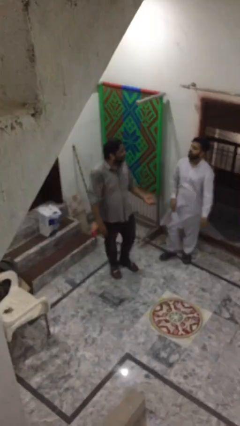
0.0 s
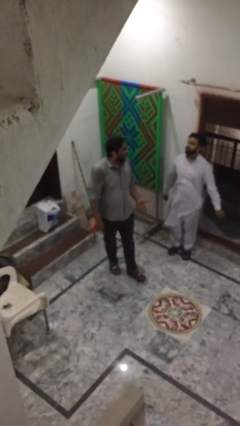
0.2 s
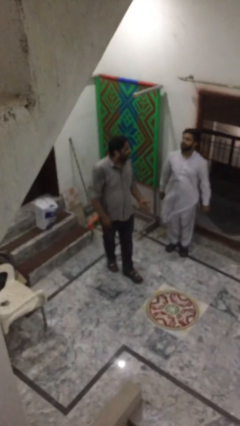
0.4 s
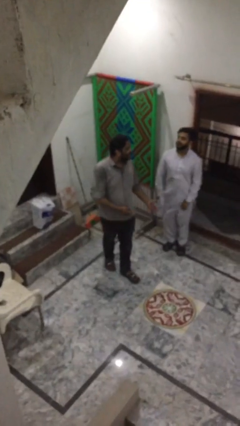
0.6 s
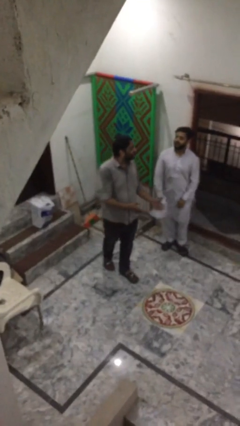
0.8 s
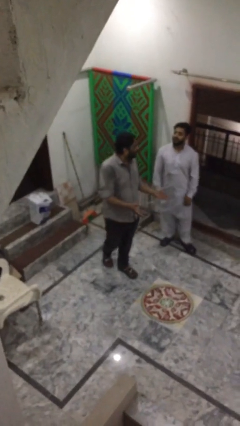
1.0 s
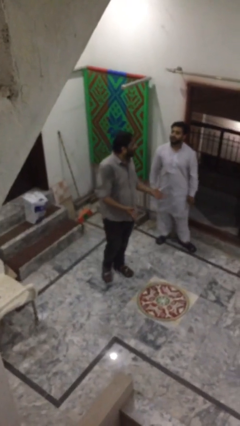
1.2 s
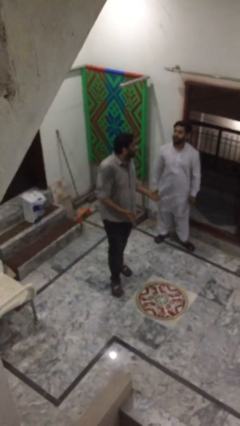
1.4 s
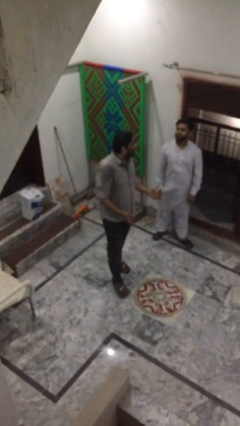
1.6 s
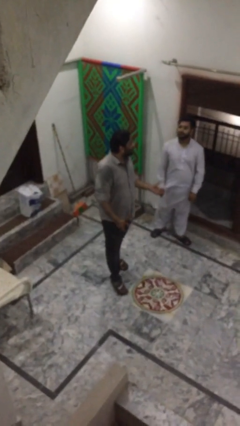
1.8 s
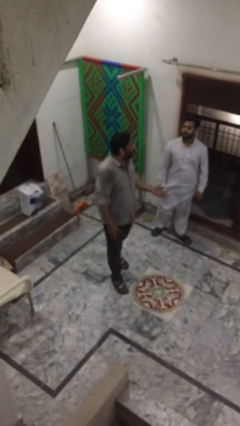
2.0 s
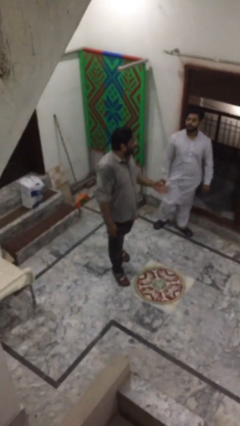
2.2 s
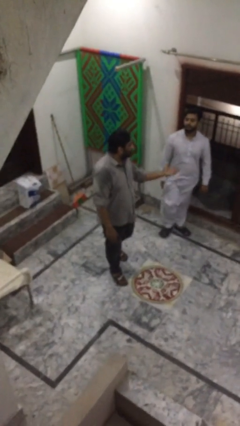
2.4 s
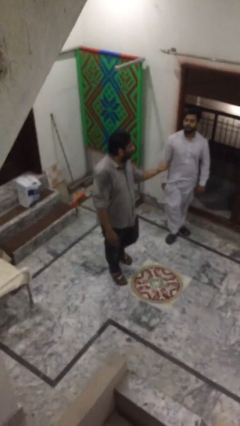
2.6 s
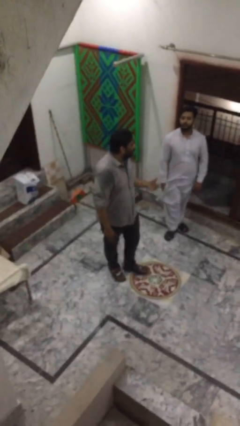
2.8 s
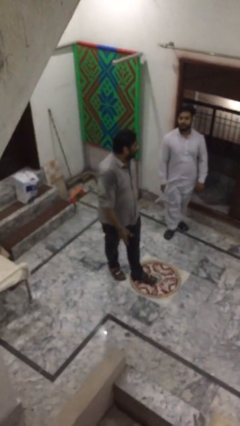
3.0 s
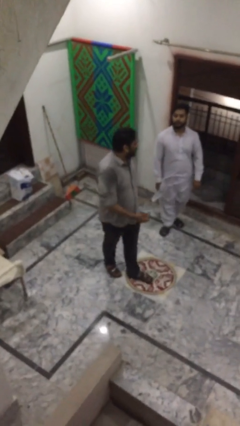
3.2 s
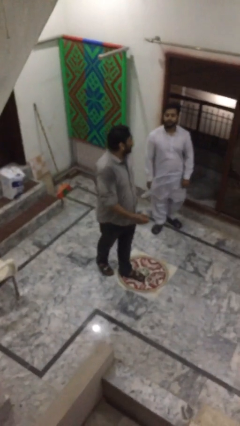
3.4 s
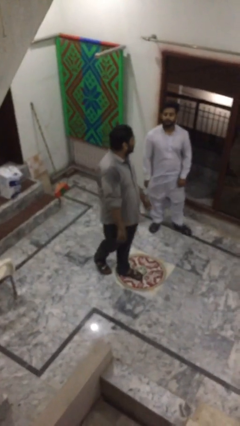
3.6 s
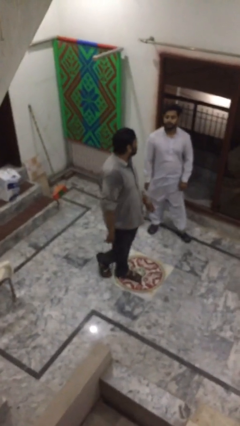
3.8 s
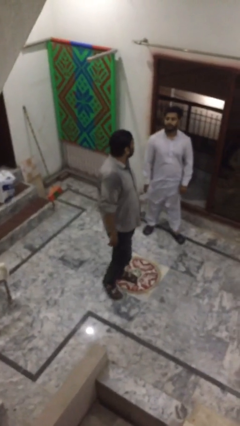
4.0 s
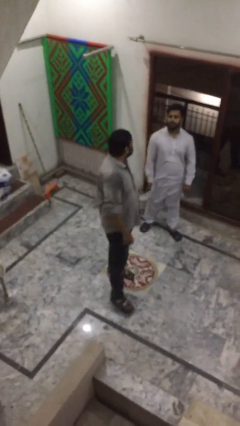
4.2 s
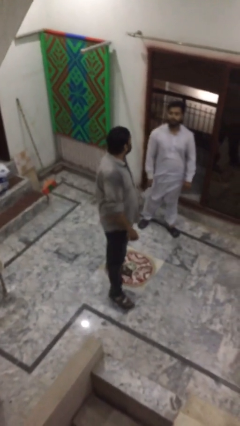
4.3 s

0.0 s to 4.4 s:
person talks to person

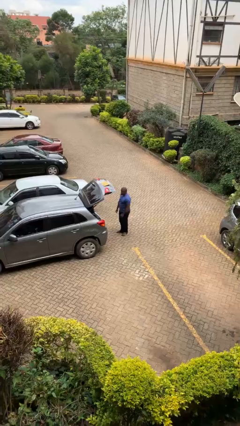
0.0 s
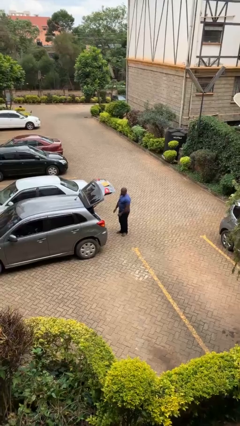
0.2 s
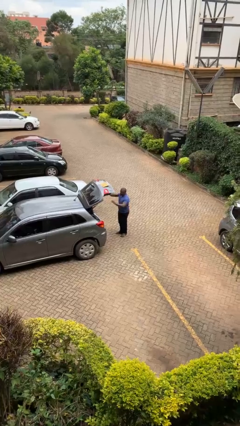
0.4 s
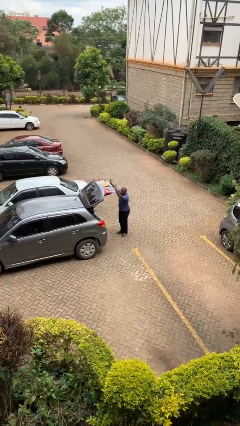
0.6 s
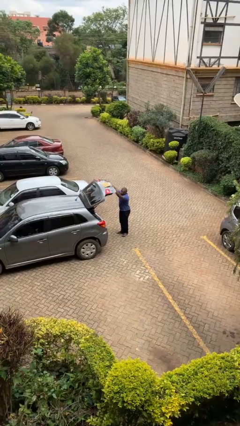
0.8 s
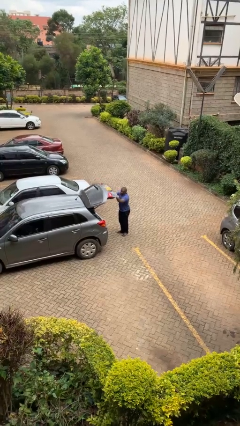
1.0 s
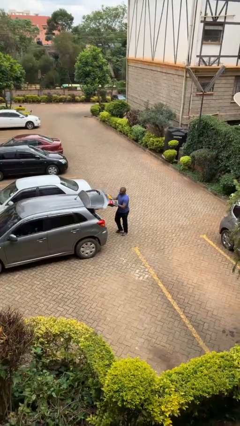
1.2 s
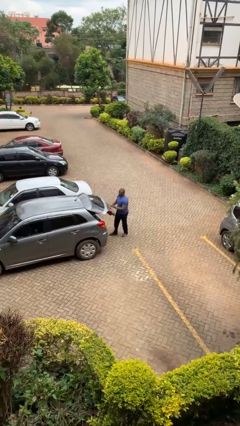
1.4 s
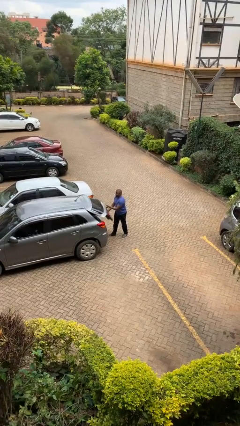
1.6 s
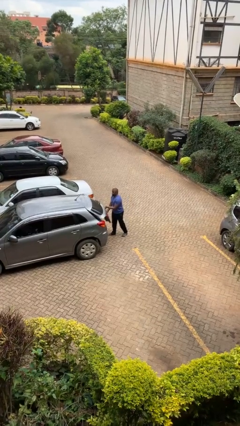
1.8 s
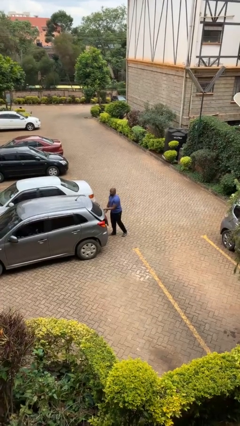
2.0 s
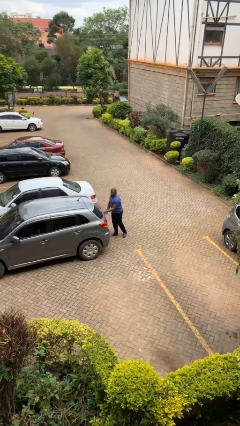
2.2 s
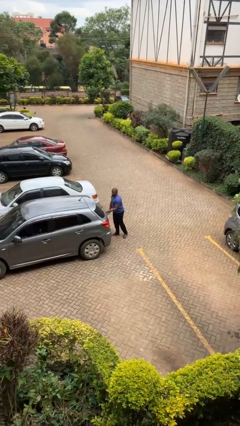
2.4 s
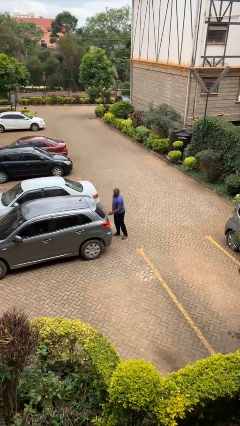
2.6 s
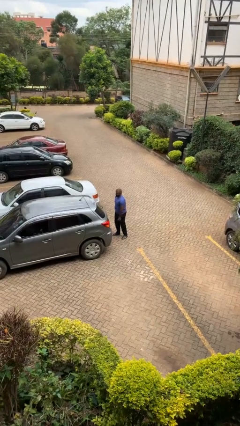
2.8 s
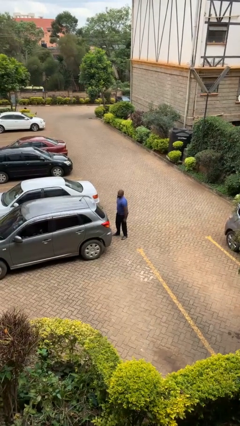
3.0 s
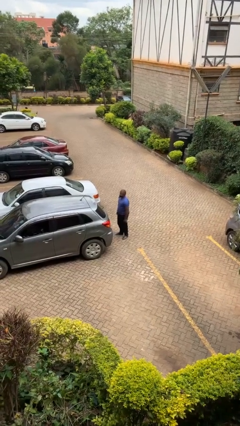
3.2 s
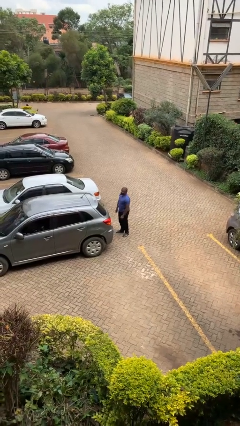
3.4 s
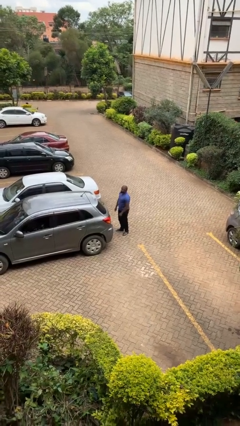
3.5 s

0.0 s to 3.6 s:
person closes car trunk

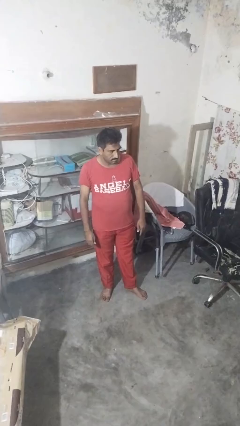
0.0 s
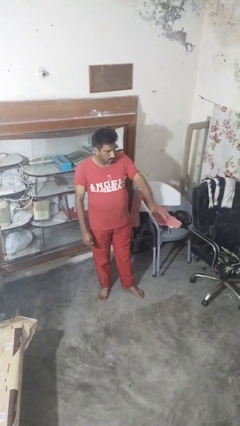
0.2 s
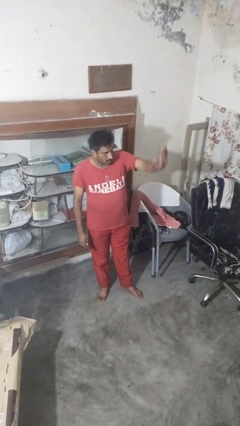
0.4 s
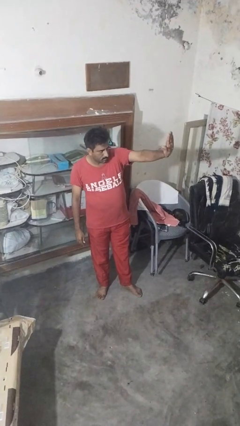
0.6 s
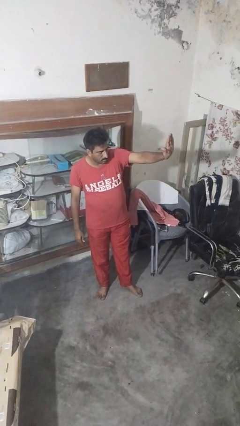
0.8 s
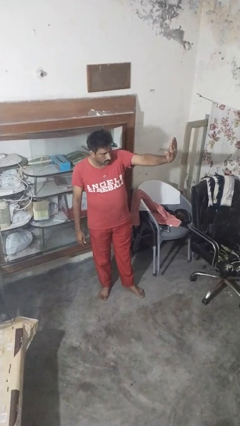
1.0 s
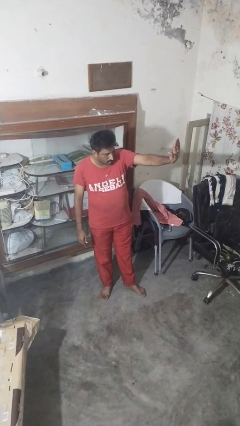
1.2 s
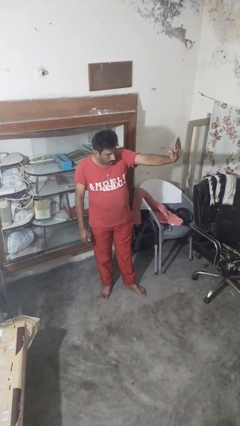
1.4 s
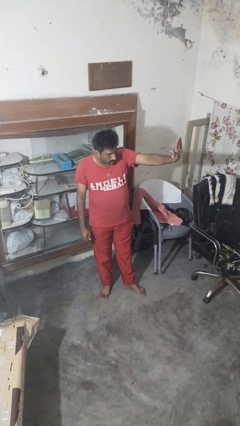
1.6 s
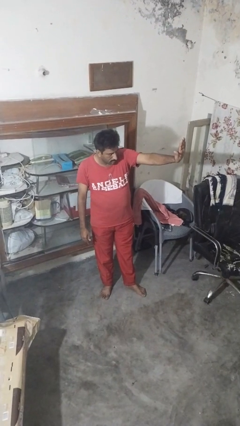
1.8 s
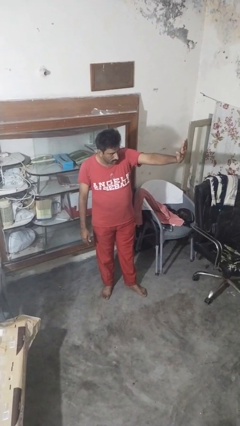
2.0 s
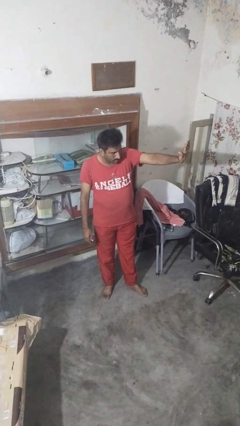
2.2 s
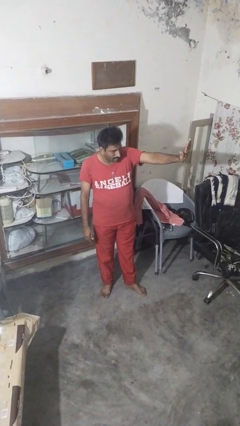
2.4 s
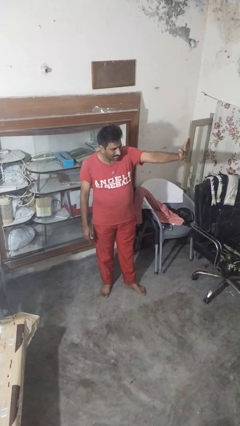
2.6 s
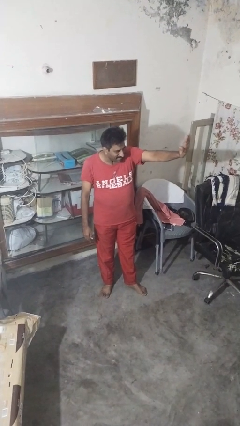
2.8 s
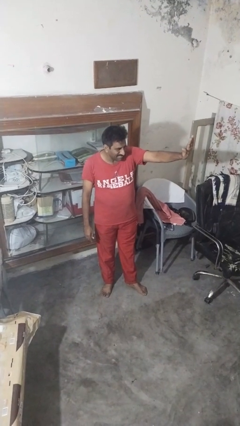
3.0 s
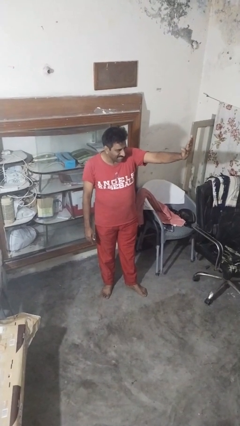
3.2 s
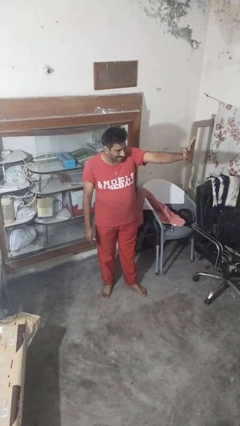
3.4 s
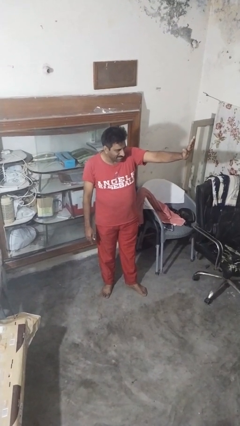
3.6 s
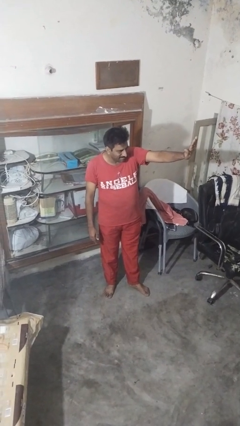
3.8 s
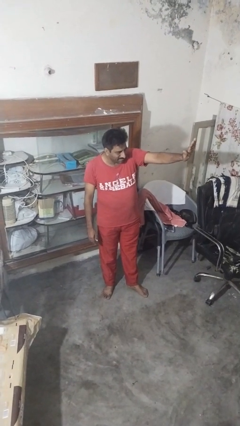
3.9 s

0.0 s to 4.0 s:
person gestures stop

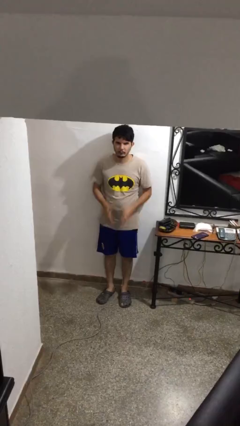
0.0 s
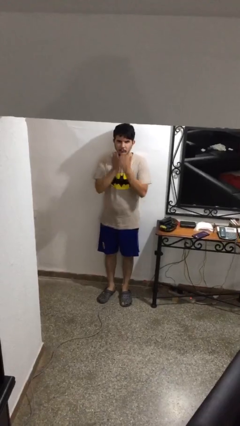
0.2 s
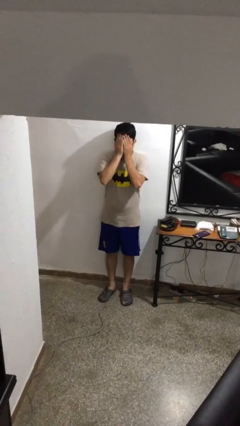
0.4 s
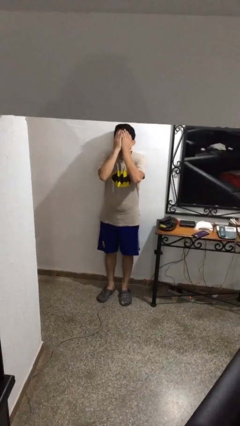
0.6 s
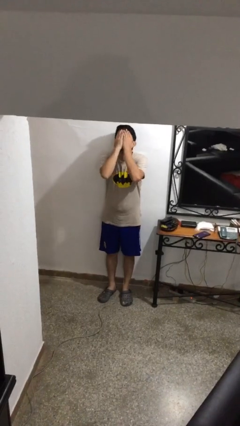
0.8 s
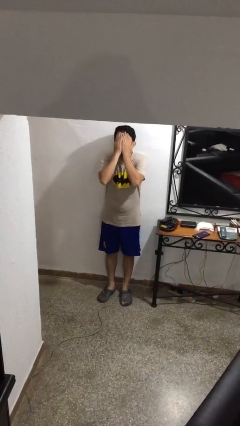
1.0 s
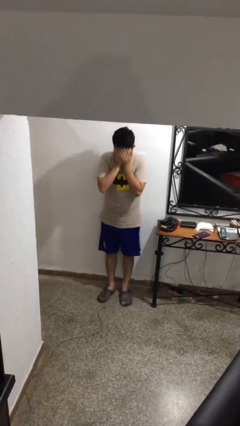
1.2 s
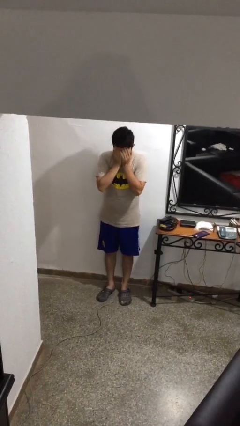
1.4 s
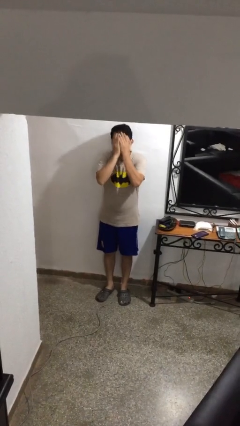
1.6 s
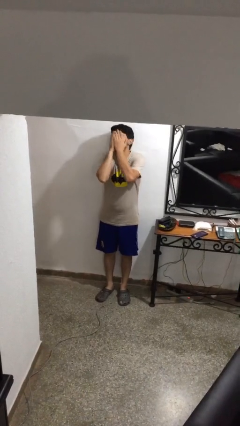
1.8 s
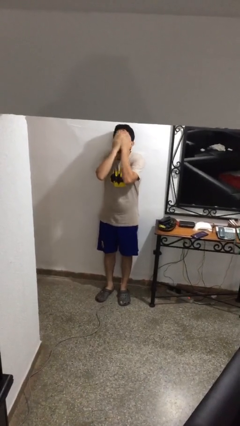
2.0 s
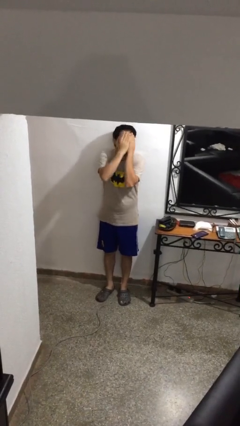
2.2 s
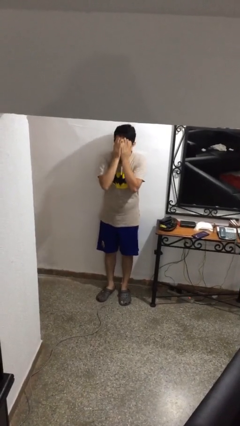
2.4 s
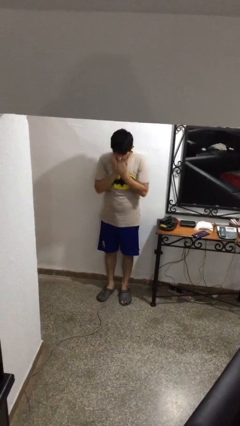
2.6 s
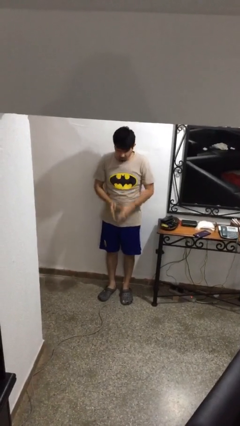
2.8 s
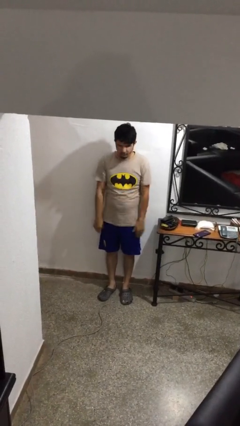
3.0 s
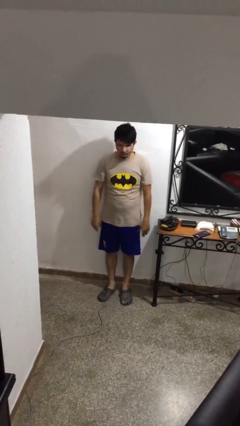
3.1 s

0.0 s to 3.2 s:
person covers face with hands

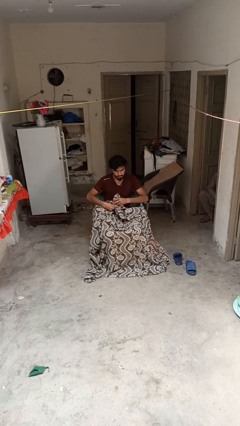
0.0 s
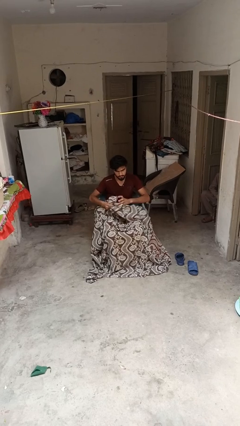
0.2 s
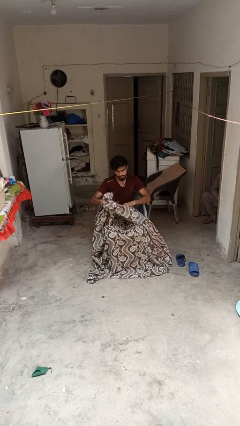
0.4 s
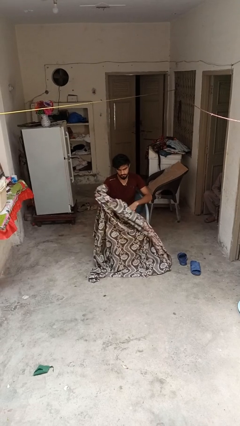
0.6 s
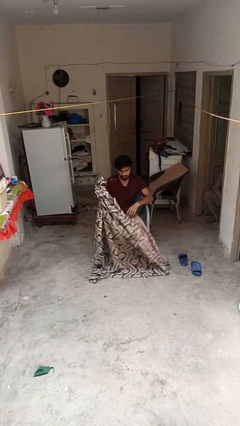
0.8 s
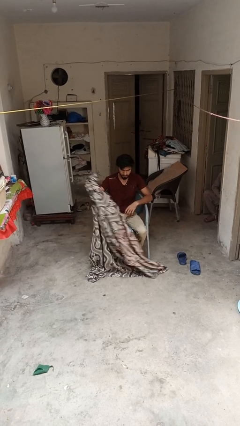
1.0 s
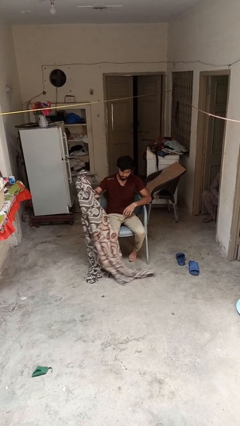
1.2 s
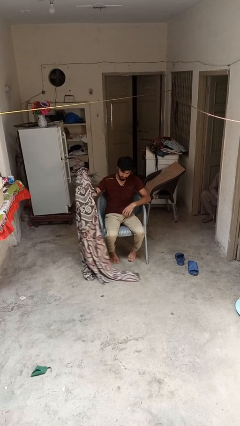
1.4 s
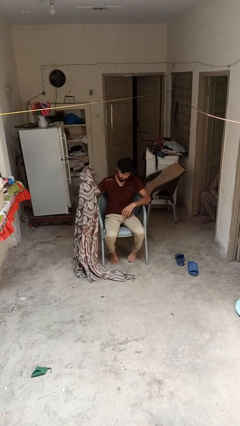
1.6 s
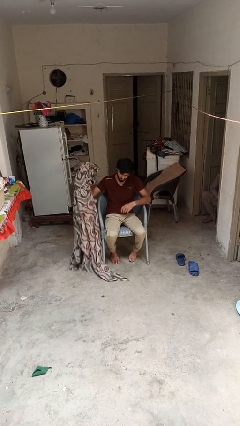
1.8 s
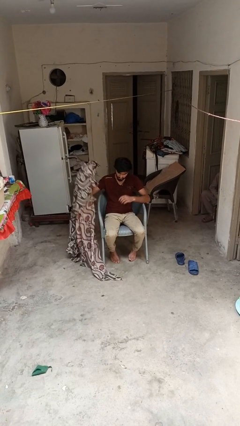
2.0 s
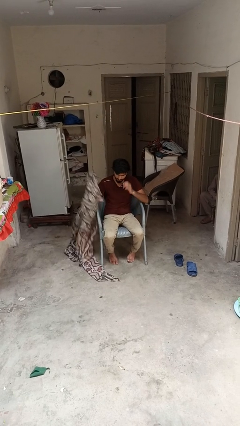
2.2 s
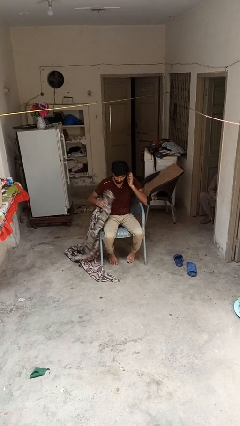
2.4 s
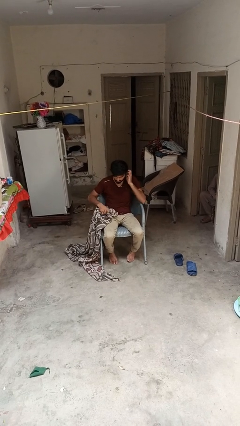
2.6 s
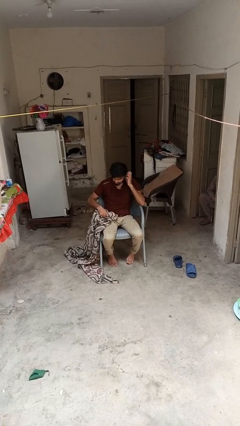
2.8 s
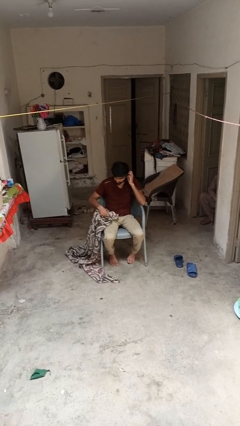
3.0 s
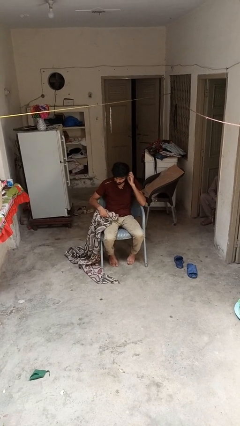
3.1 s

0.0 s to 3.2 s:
person uncovers with blanket
